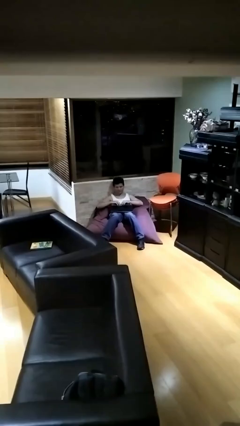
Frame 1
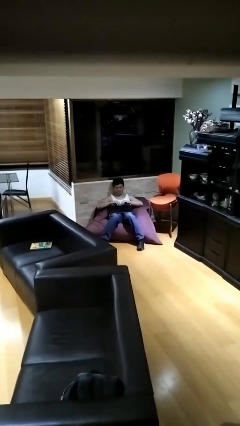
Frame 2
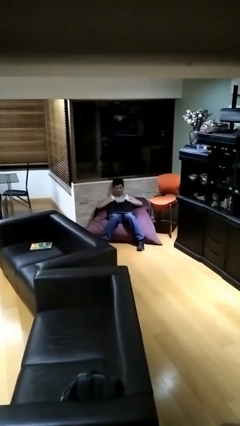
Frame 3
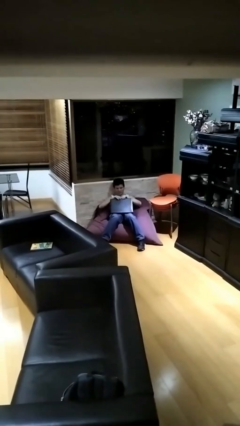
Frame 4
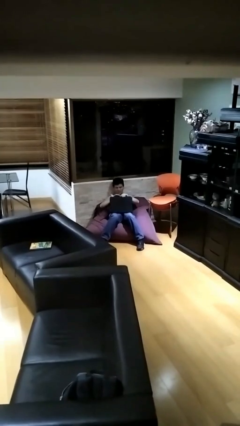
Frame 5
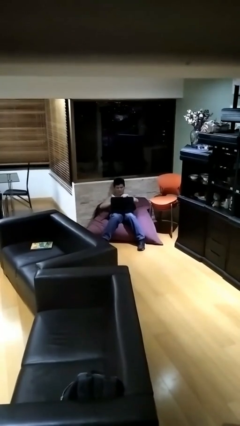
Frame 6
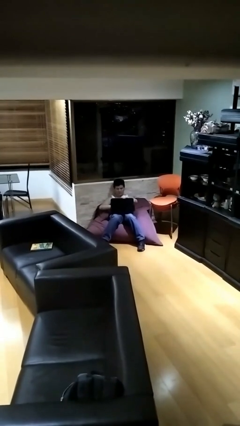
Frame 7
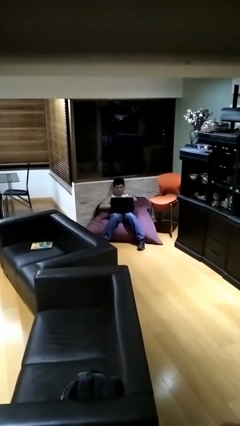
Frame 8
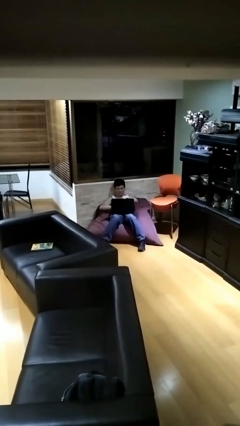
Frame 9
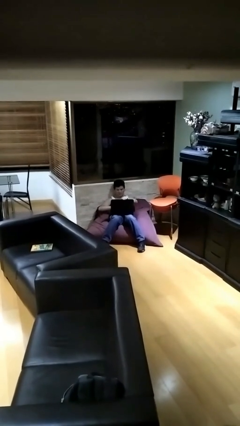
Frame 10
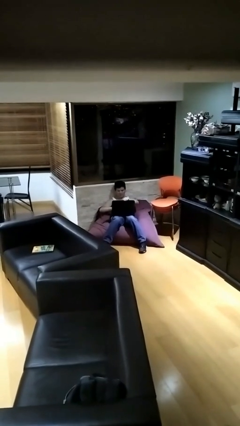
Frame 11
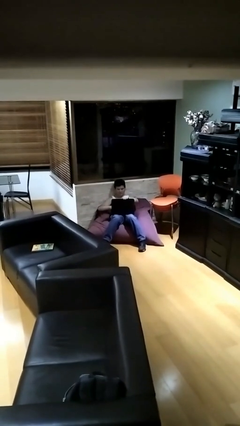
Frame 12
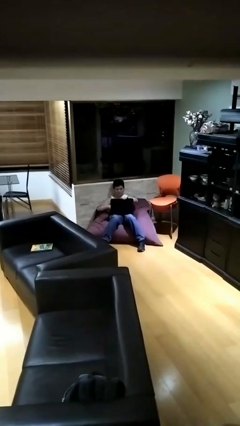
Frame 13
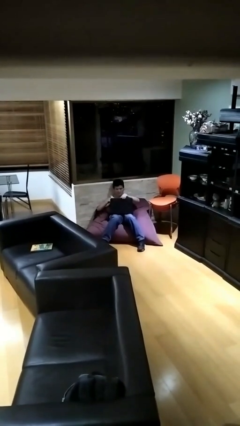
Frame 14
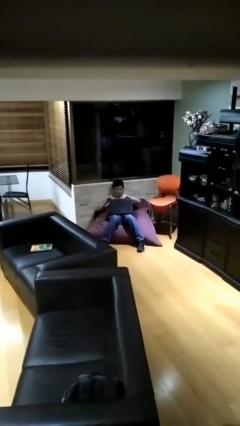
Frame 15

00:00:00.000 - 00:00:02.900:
person interacts with laptop

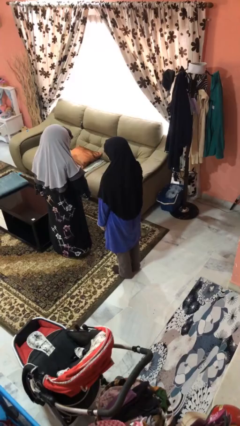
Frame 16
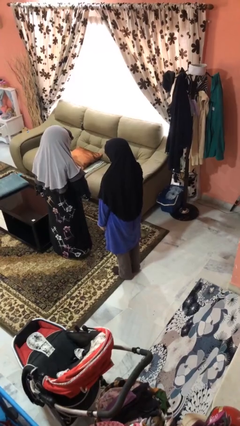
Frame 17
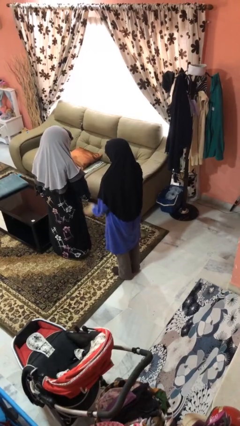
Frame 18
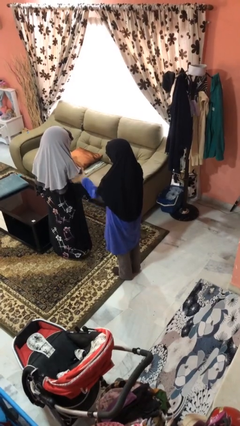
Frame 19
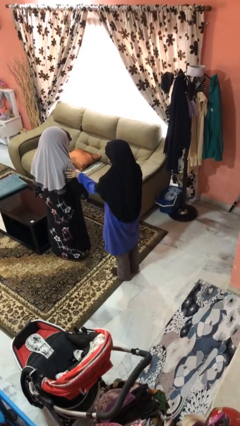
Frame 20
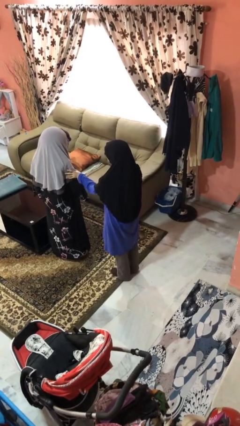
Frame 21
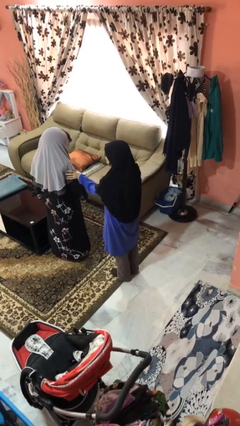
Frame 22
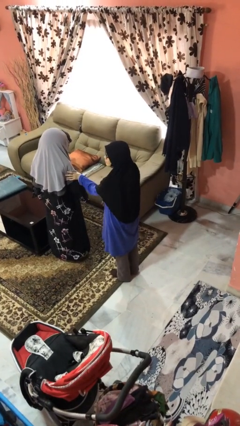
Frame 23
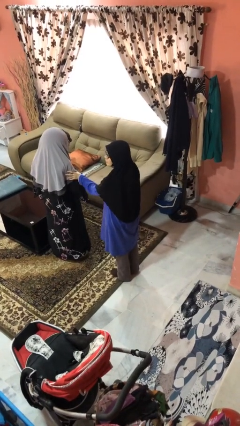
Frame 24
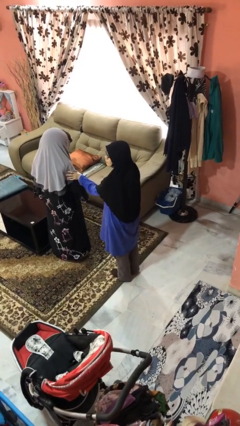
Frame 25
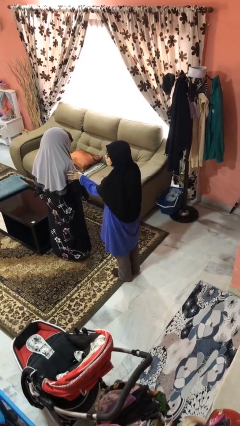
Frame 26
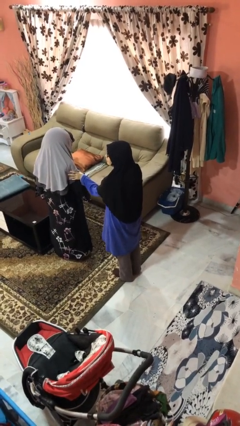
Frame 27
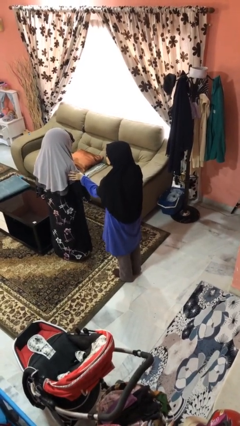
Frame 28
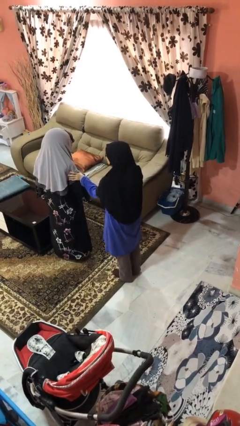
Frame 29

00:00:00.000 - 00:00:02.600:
person grabs person by bicep

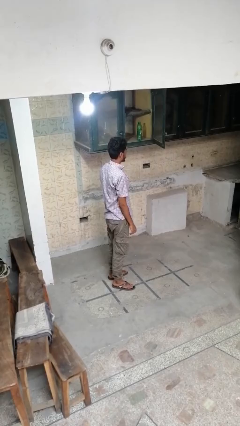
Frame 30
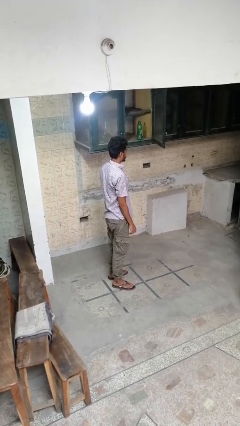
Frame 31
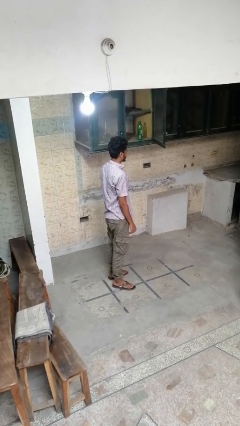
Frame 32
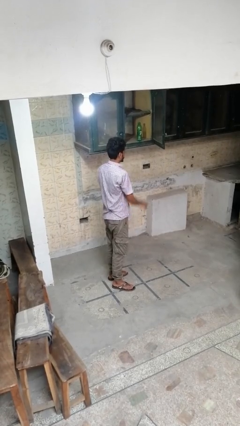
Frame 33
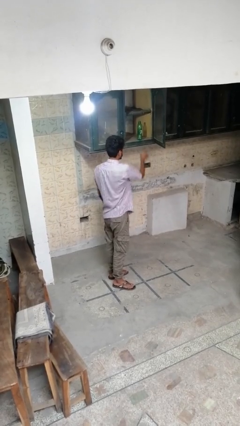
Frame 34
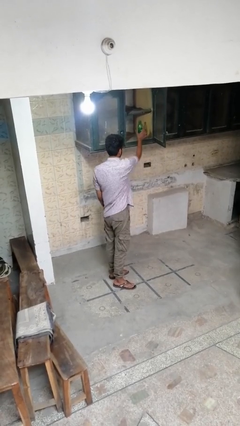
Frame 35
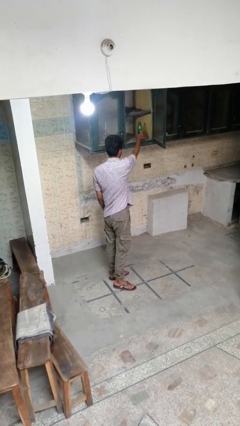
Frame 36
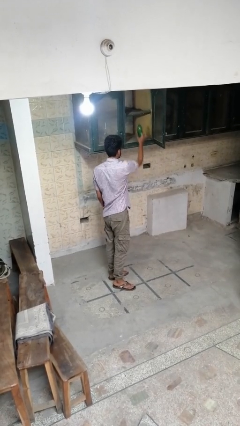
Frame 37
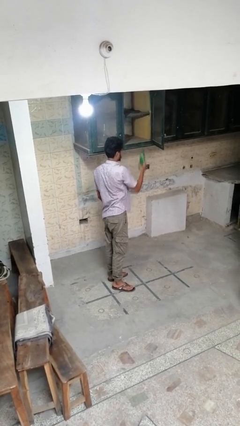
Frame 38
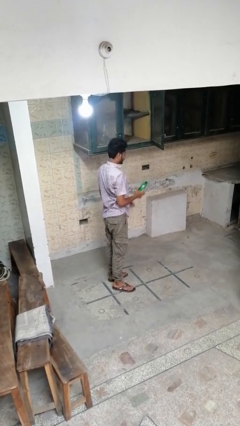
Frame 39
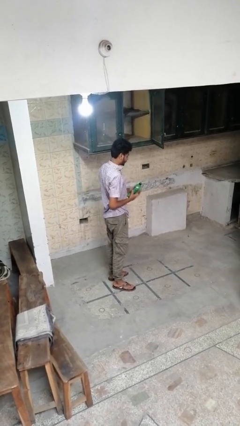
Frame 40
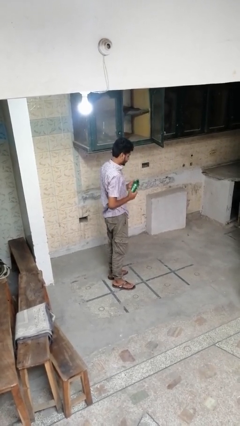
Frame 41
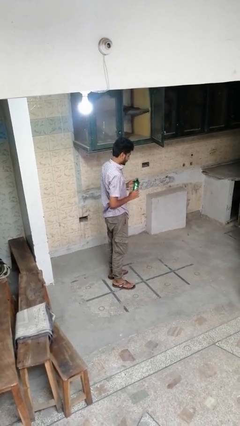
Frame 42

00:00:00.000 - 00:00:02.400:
person picks up object from cabinet

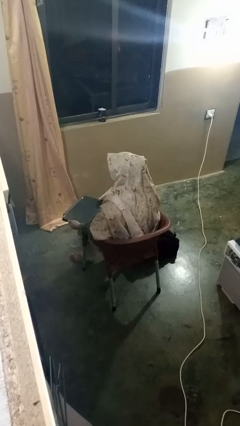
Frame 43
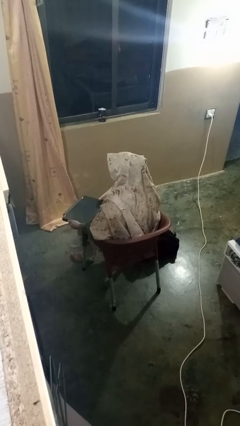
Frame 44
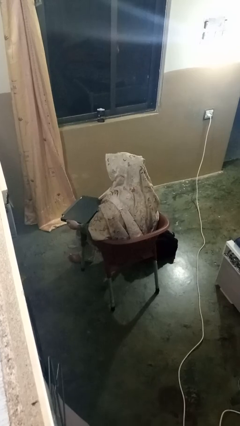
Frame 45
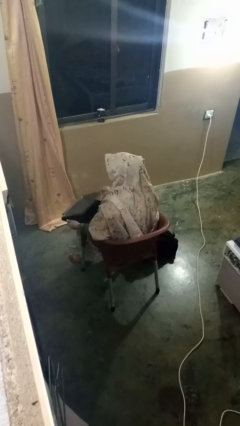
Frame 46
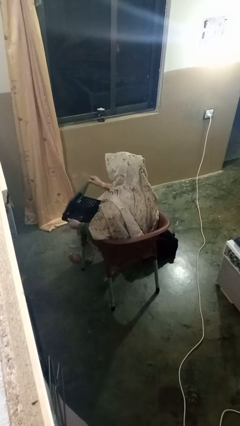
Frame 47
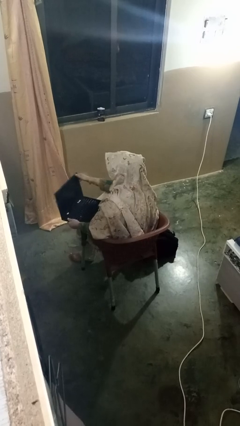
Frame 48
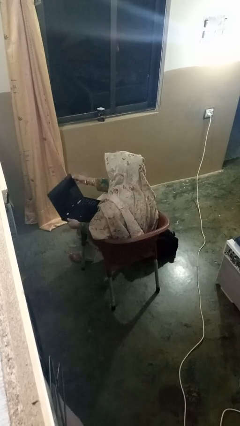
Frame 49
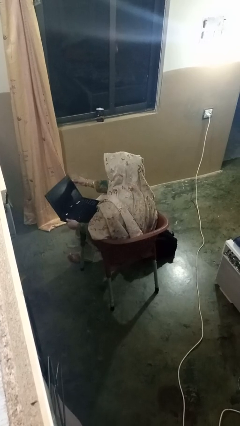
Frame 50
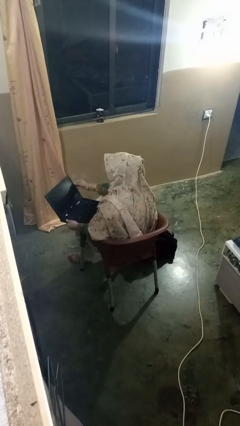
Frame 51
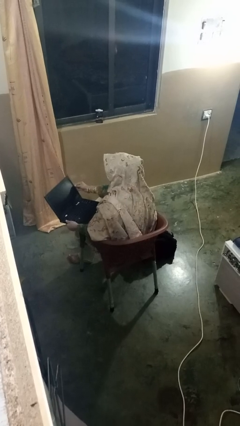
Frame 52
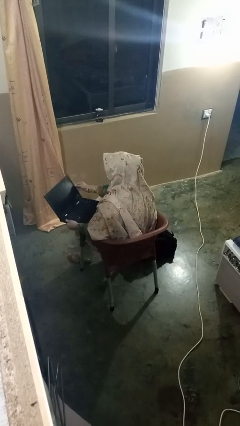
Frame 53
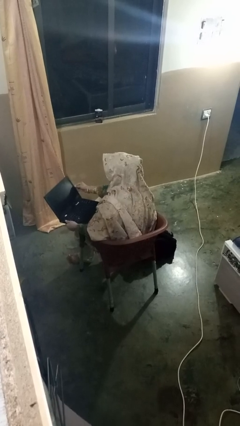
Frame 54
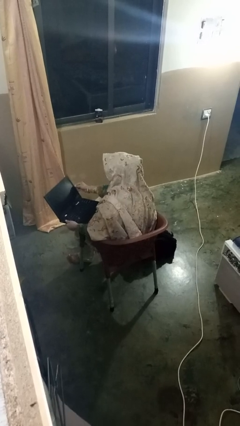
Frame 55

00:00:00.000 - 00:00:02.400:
person opens laptop

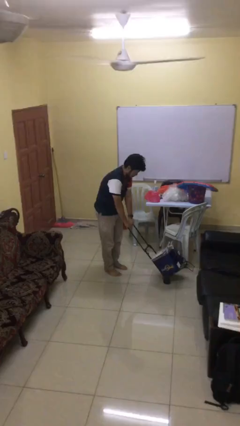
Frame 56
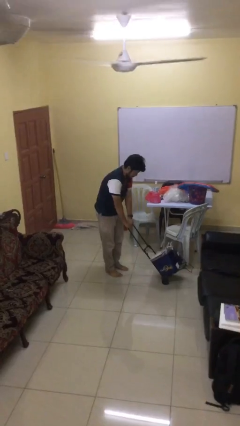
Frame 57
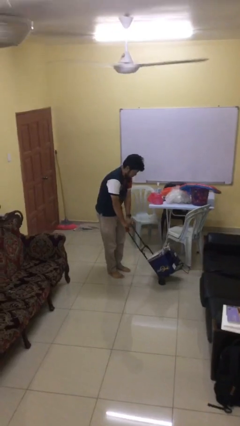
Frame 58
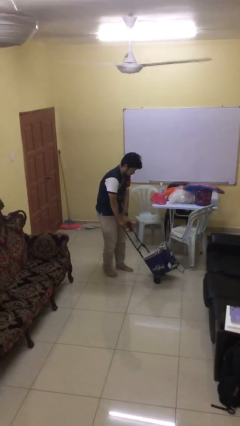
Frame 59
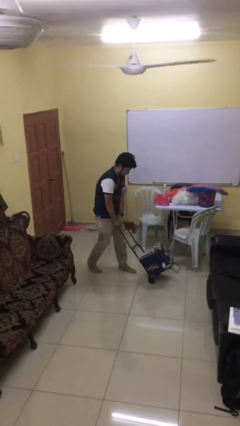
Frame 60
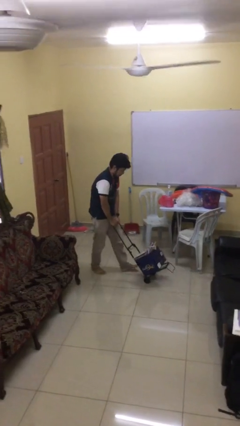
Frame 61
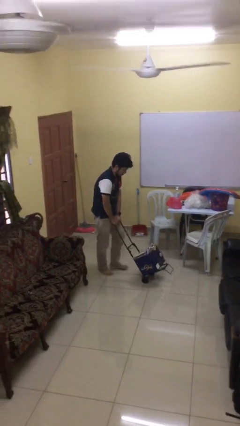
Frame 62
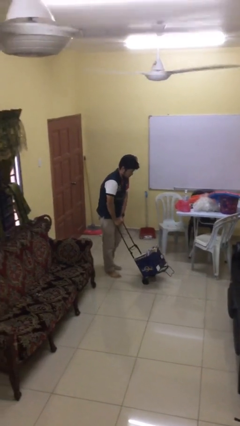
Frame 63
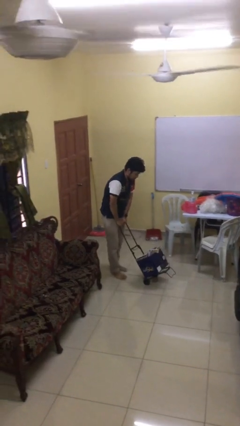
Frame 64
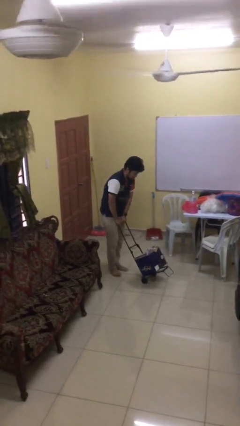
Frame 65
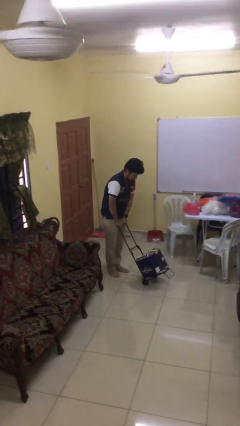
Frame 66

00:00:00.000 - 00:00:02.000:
person pulls wheeled cart

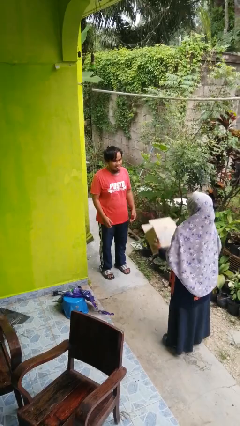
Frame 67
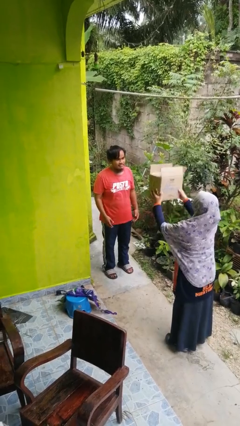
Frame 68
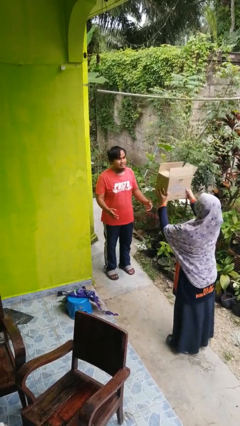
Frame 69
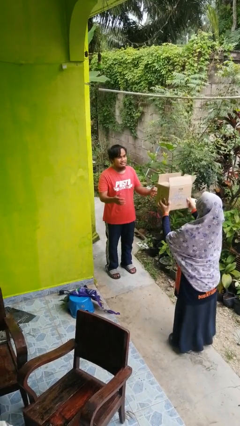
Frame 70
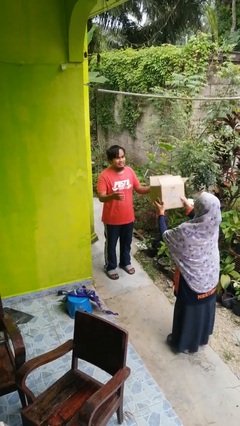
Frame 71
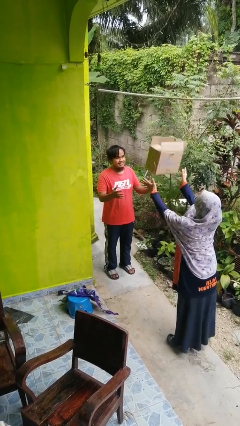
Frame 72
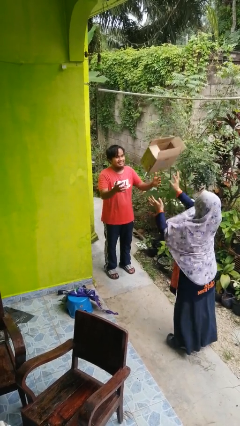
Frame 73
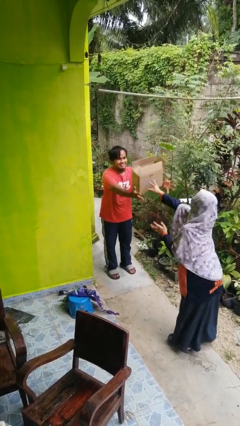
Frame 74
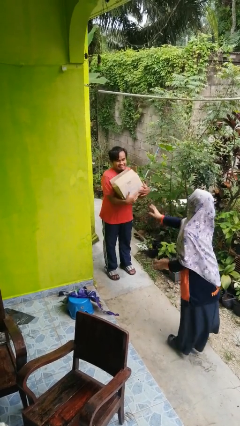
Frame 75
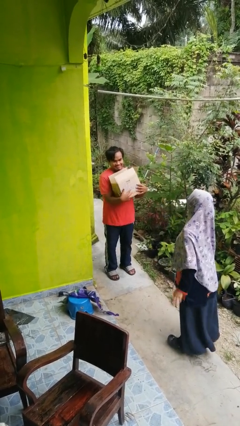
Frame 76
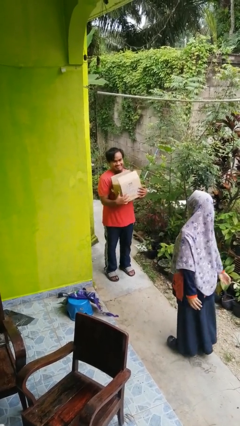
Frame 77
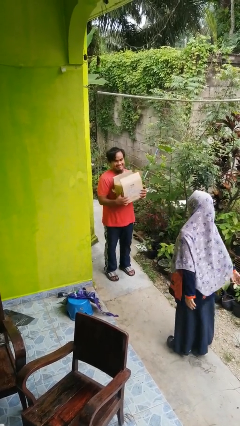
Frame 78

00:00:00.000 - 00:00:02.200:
person catches object from person

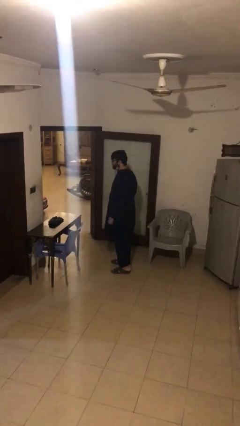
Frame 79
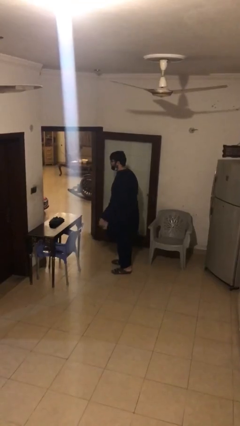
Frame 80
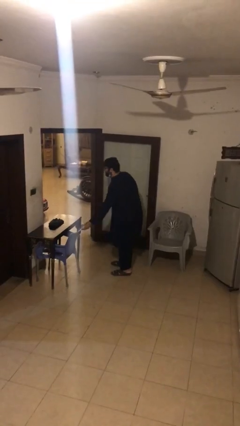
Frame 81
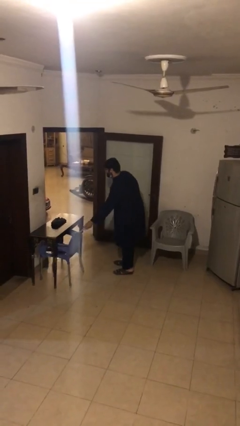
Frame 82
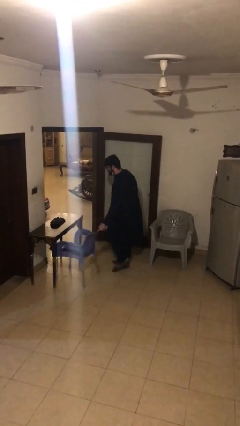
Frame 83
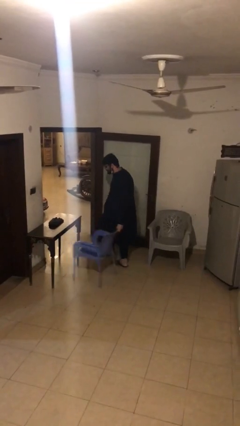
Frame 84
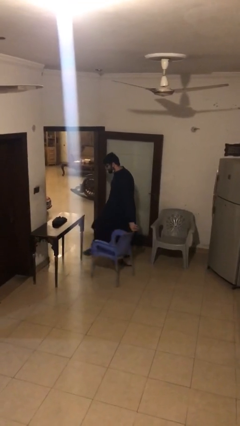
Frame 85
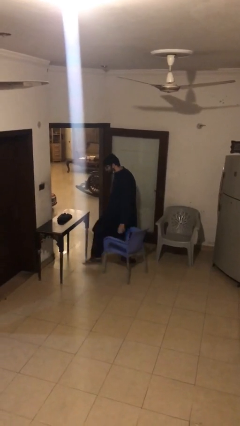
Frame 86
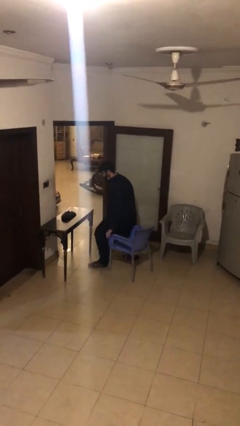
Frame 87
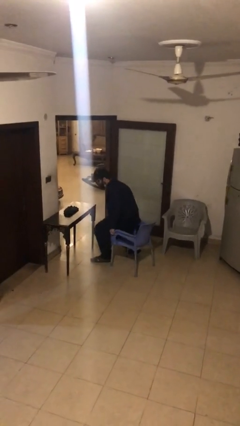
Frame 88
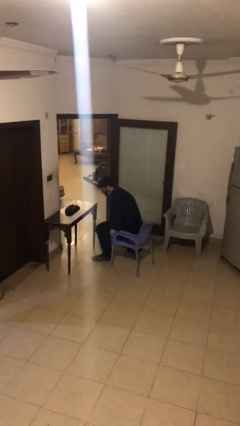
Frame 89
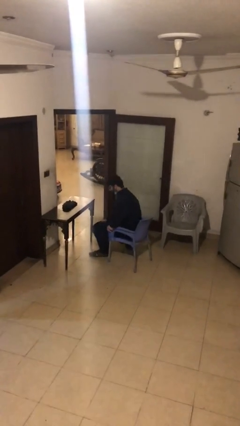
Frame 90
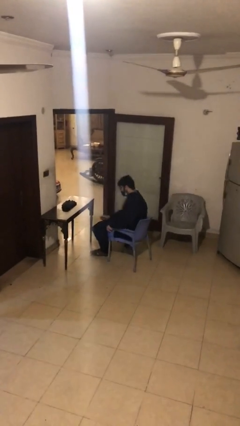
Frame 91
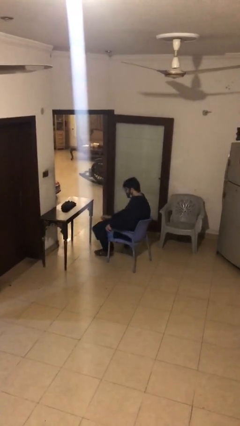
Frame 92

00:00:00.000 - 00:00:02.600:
person sits down

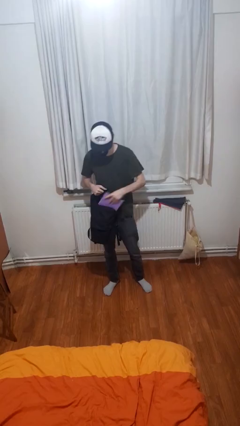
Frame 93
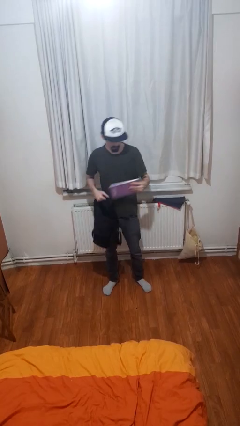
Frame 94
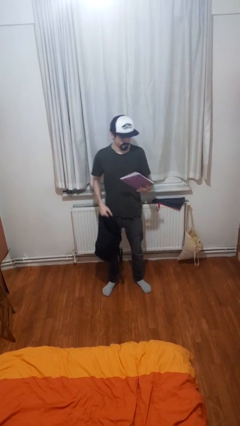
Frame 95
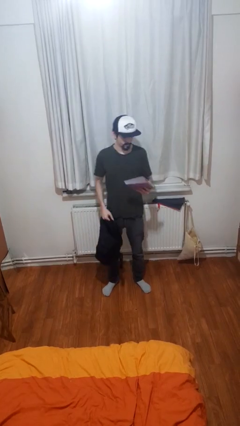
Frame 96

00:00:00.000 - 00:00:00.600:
person takes object from backpack
